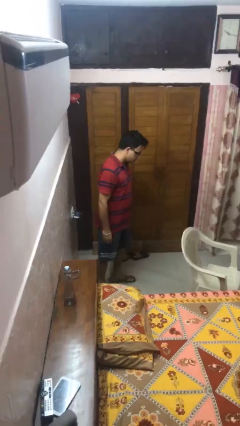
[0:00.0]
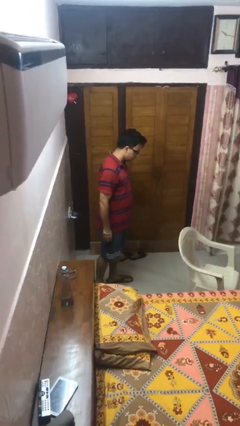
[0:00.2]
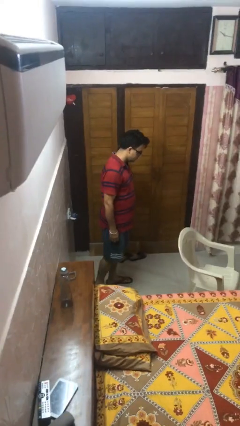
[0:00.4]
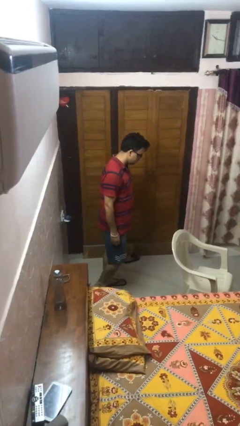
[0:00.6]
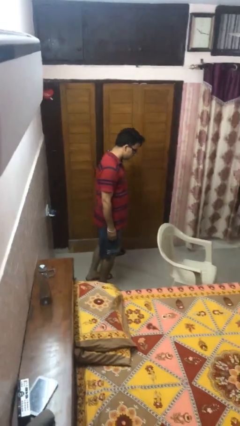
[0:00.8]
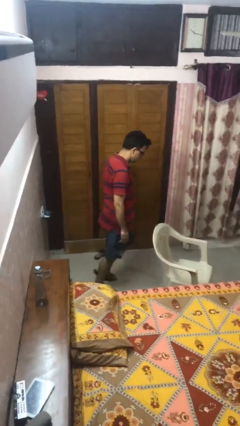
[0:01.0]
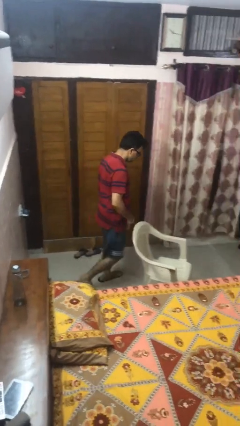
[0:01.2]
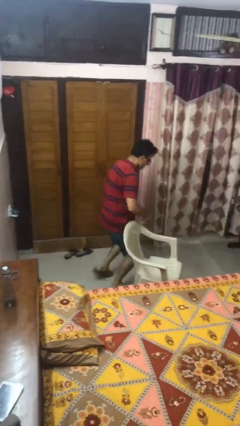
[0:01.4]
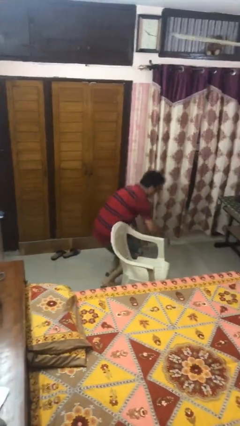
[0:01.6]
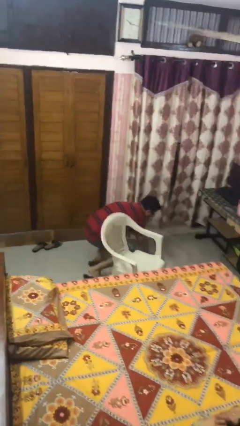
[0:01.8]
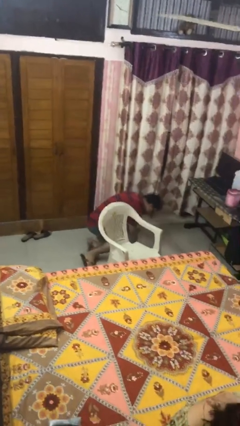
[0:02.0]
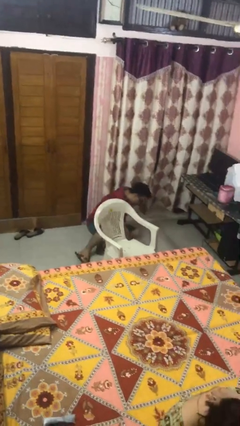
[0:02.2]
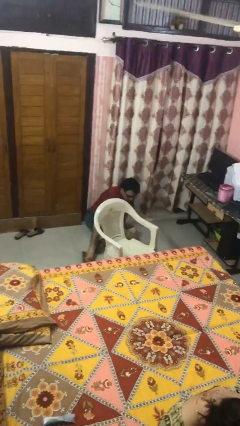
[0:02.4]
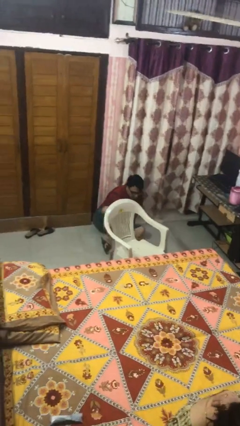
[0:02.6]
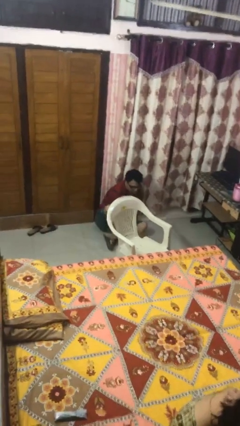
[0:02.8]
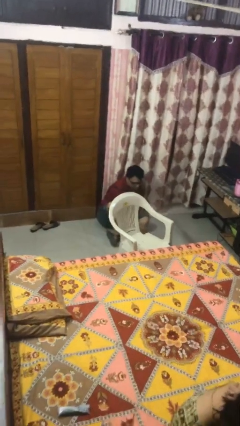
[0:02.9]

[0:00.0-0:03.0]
person trips on object on floor

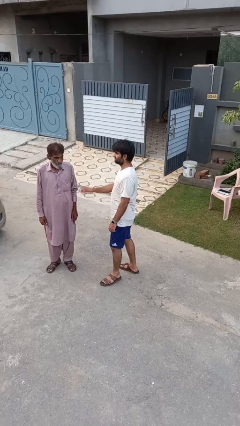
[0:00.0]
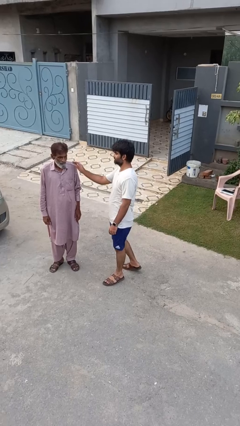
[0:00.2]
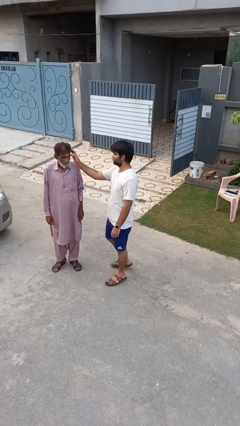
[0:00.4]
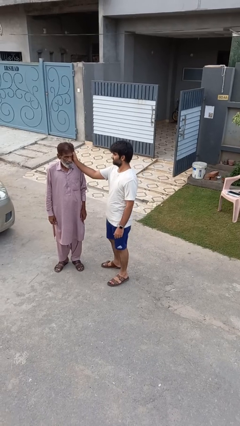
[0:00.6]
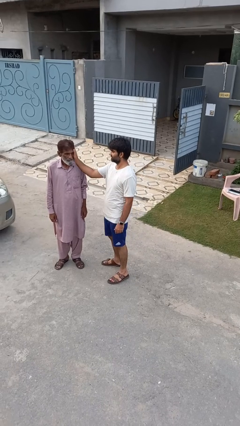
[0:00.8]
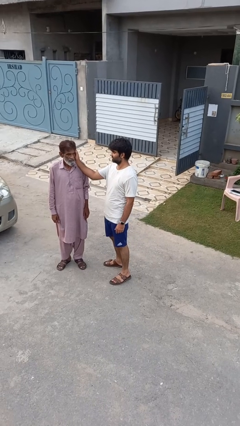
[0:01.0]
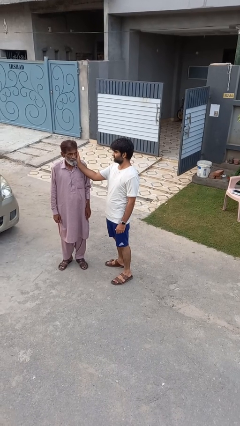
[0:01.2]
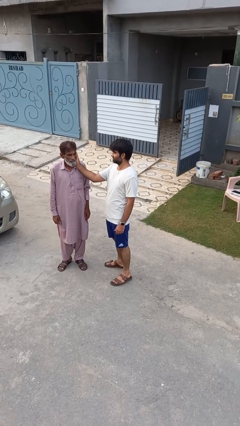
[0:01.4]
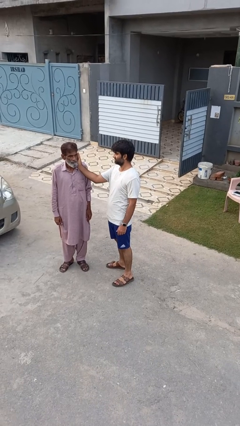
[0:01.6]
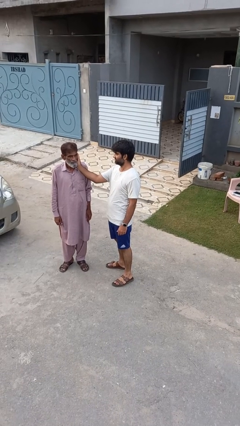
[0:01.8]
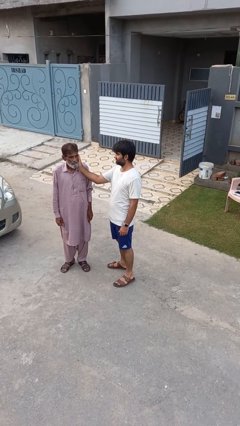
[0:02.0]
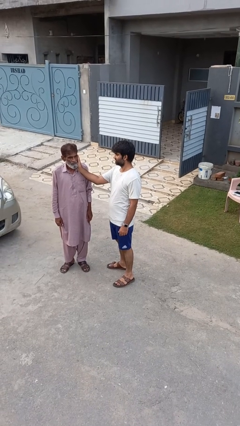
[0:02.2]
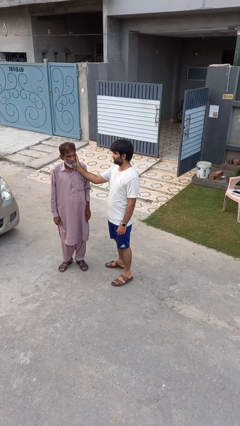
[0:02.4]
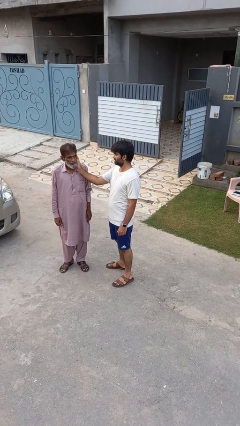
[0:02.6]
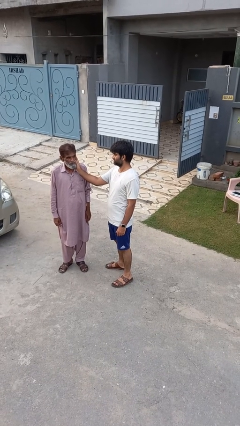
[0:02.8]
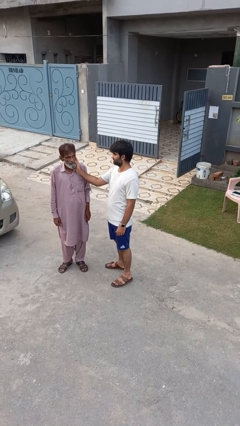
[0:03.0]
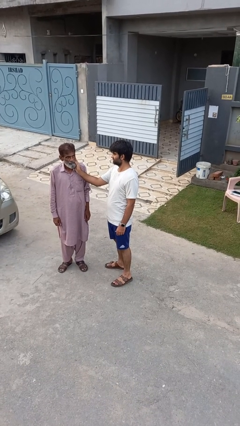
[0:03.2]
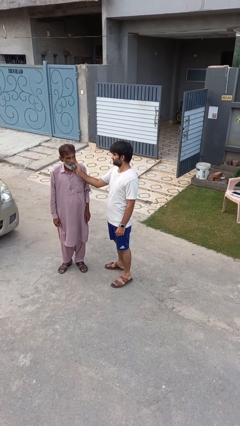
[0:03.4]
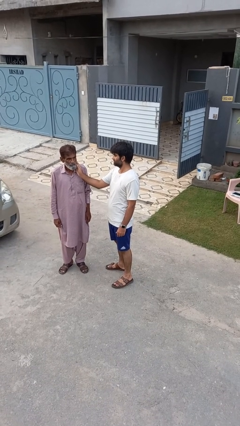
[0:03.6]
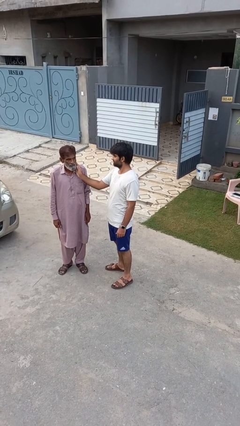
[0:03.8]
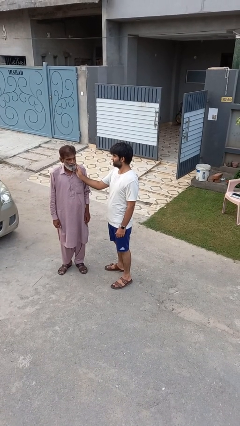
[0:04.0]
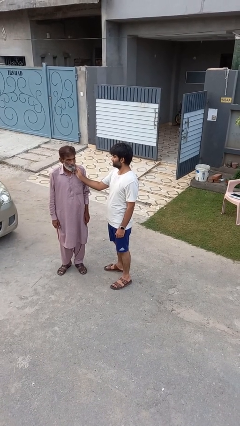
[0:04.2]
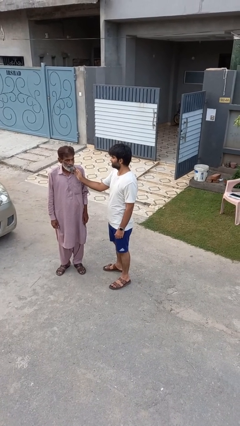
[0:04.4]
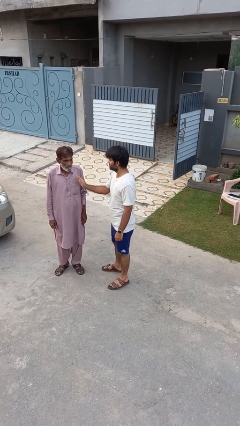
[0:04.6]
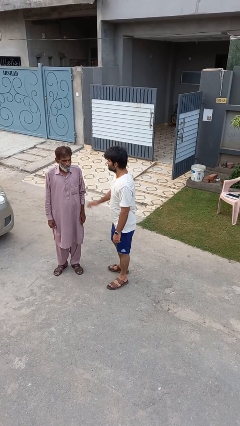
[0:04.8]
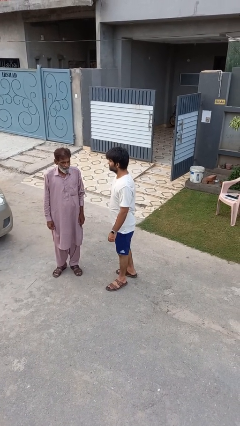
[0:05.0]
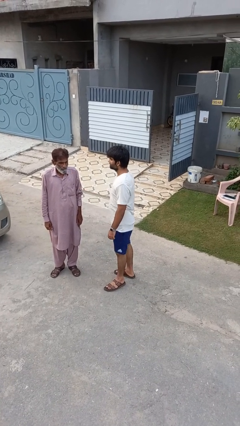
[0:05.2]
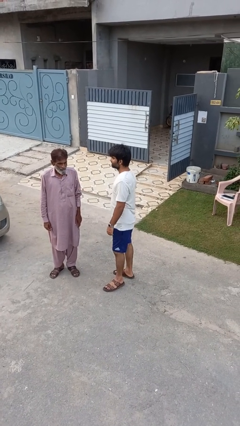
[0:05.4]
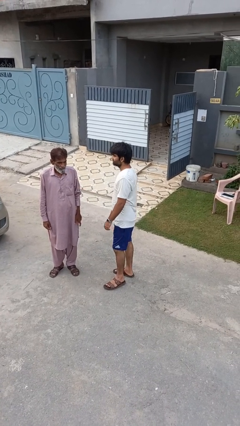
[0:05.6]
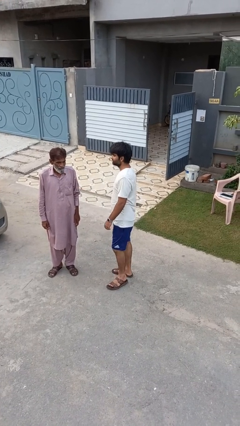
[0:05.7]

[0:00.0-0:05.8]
person touches face of person

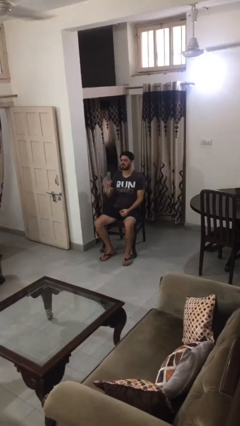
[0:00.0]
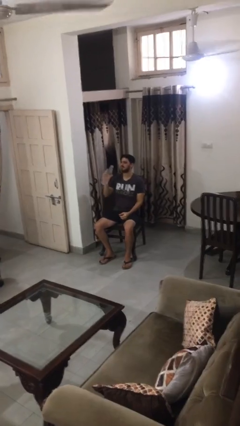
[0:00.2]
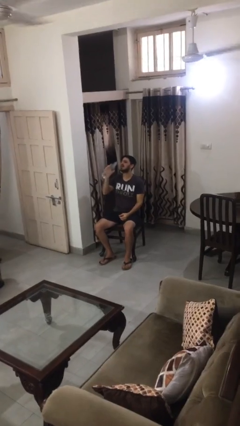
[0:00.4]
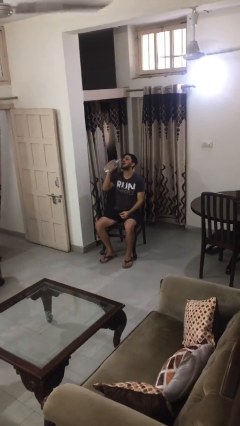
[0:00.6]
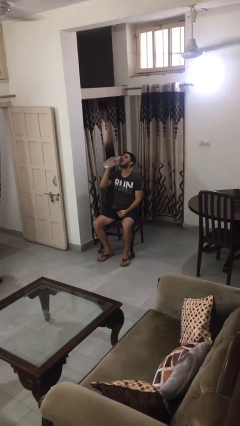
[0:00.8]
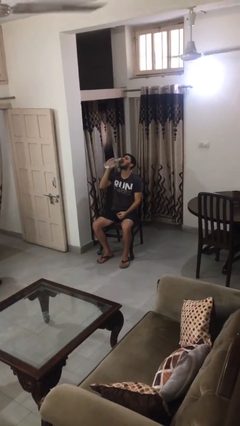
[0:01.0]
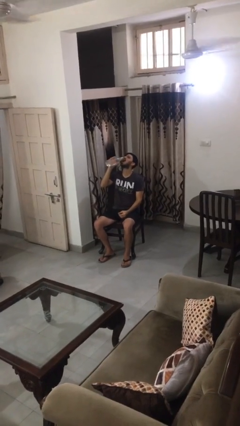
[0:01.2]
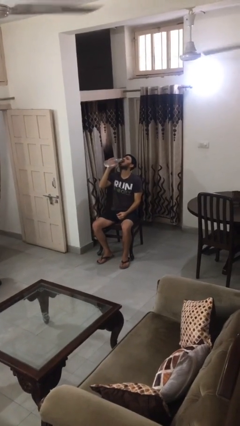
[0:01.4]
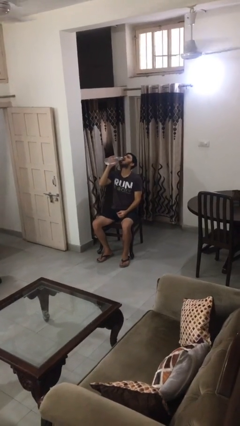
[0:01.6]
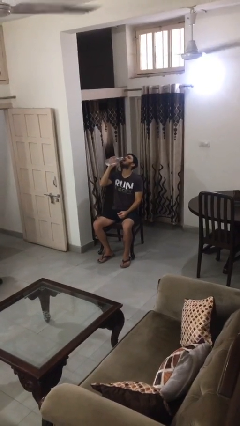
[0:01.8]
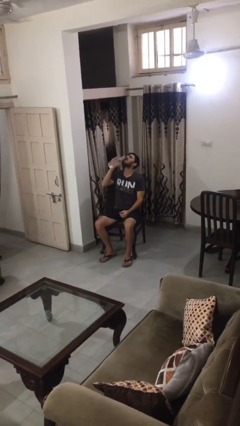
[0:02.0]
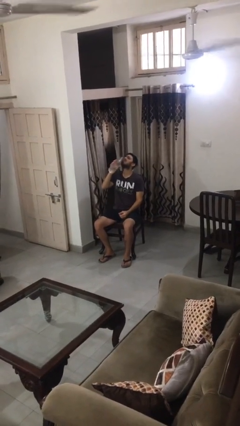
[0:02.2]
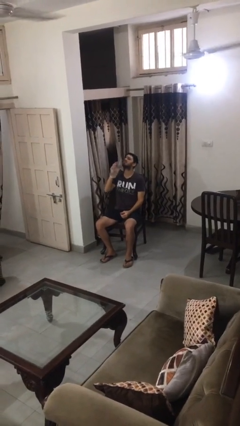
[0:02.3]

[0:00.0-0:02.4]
person drinks from bottle

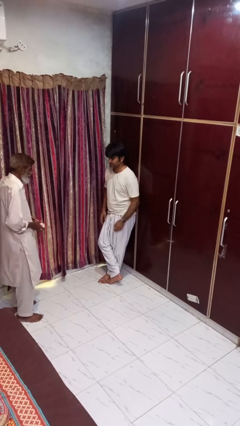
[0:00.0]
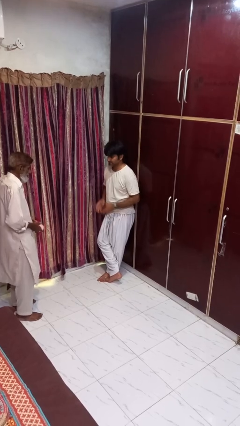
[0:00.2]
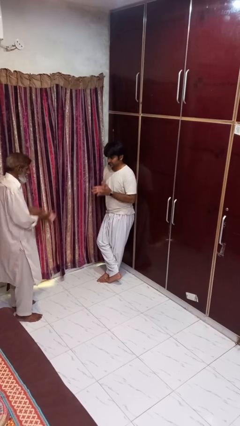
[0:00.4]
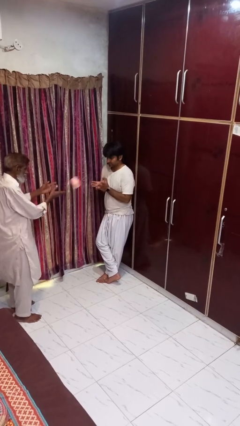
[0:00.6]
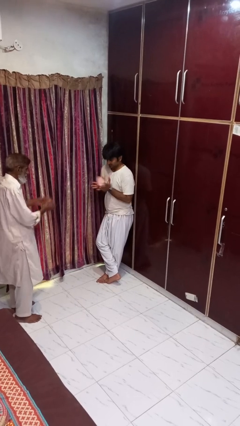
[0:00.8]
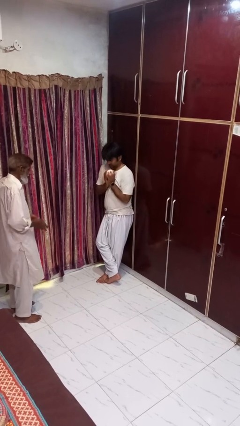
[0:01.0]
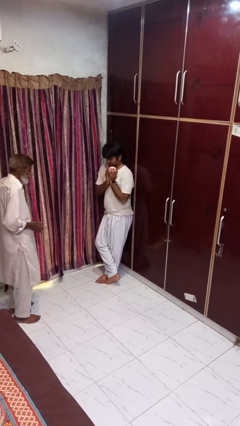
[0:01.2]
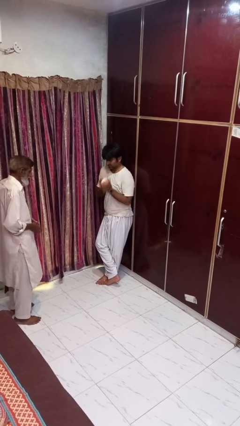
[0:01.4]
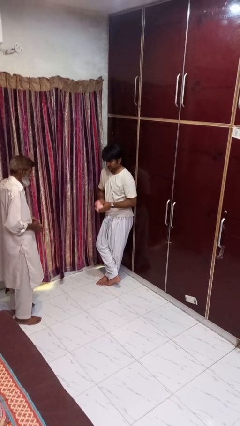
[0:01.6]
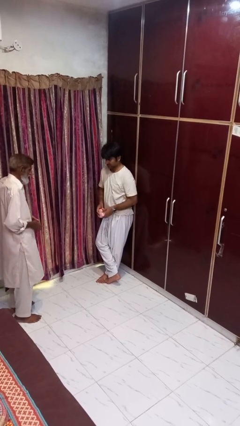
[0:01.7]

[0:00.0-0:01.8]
person catches object from person

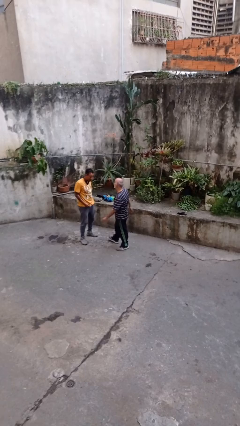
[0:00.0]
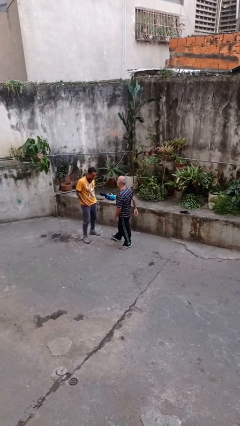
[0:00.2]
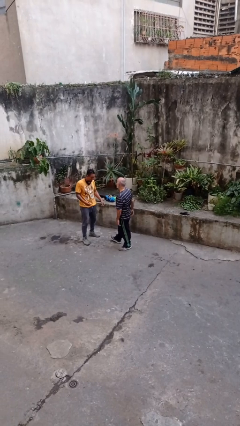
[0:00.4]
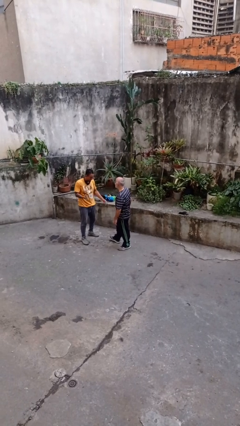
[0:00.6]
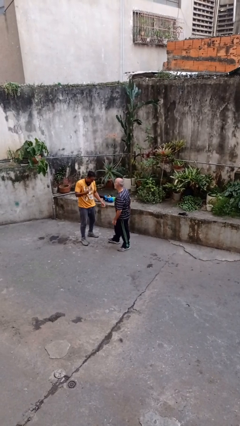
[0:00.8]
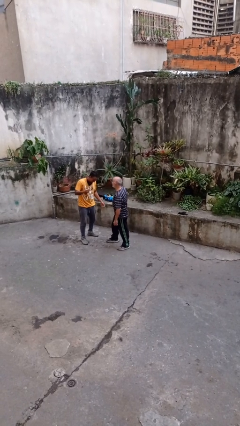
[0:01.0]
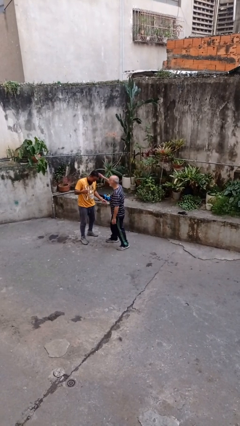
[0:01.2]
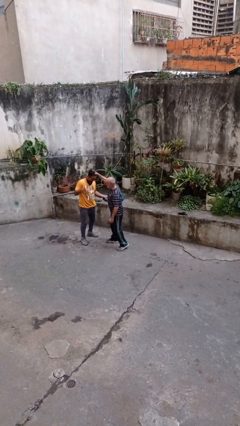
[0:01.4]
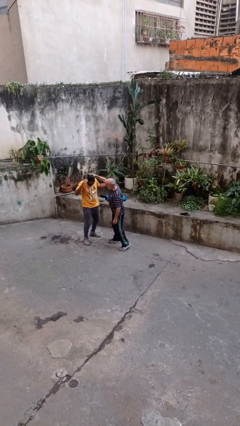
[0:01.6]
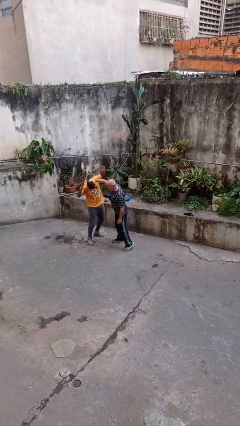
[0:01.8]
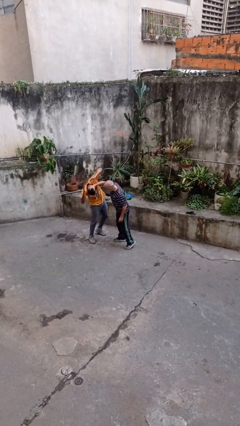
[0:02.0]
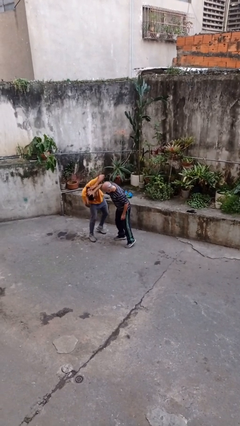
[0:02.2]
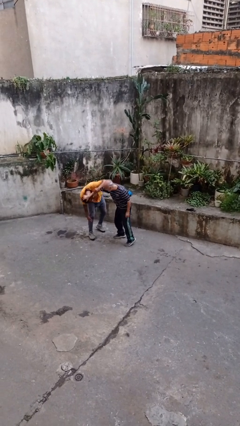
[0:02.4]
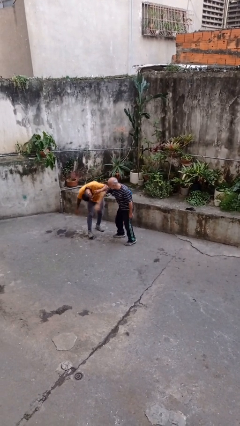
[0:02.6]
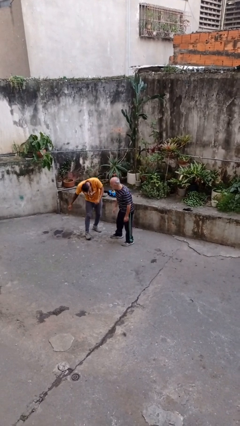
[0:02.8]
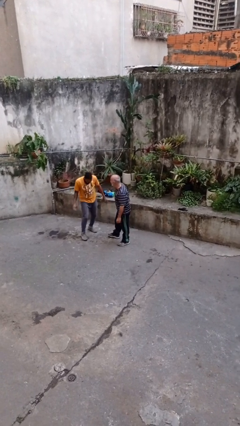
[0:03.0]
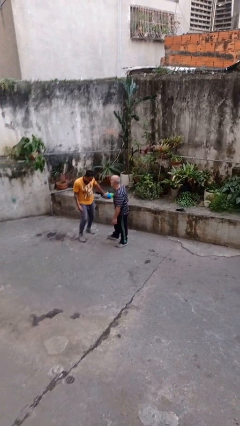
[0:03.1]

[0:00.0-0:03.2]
person grabs person by hair

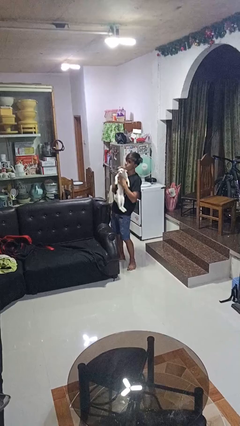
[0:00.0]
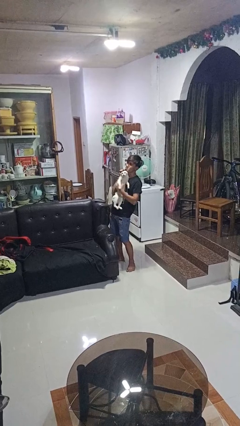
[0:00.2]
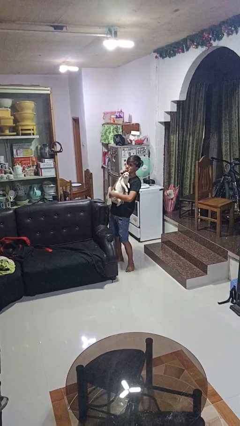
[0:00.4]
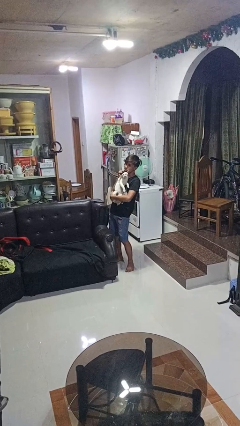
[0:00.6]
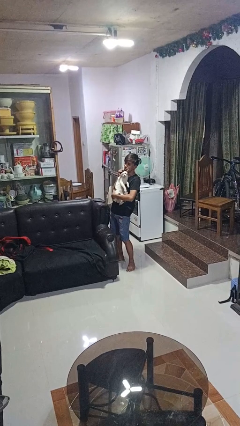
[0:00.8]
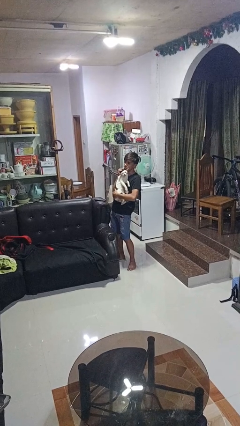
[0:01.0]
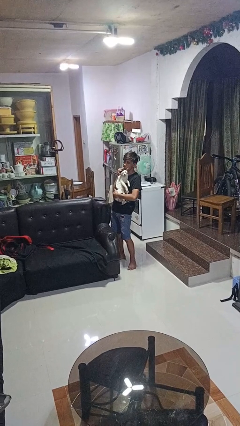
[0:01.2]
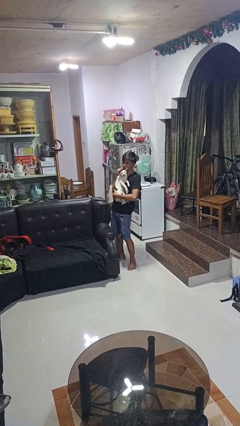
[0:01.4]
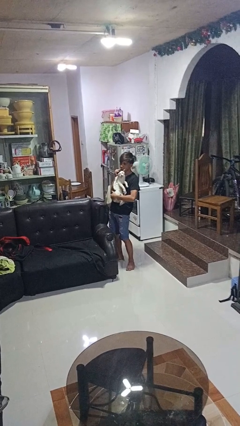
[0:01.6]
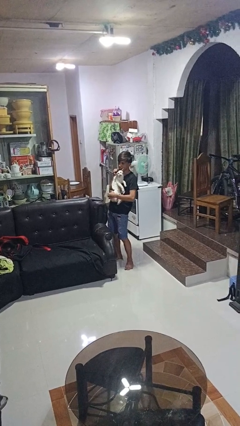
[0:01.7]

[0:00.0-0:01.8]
person hugs cat
